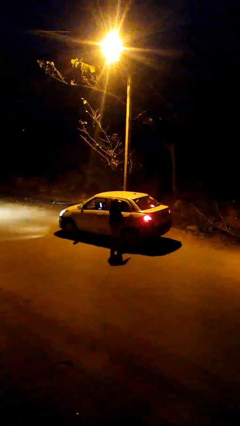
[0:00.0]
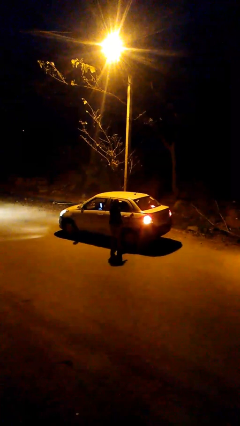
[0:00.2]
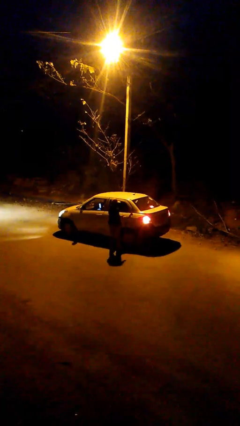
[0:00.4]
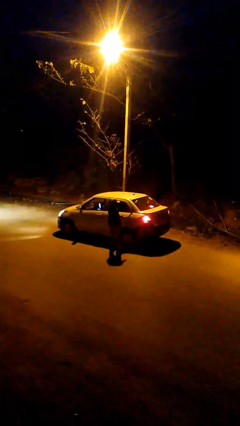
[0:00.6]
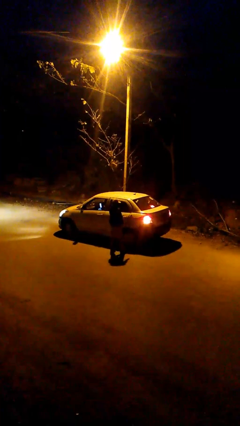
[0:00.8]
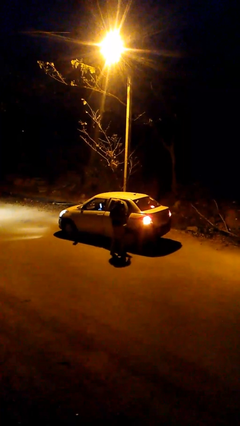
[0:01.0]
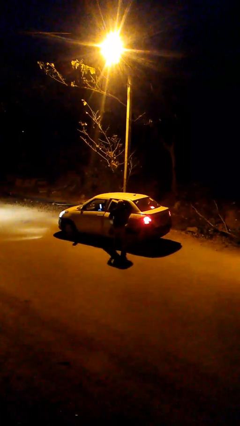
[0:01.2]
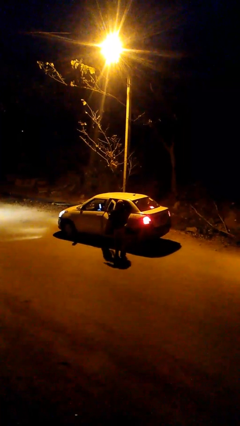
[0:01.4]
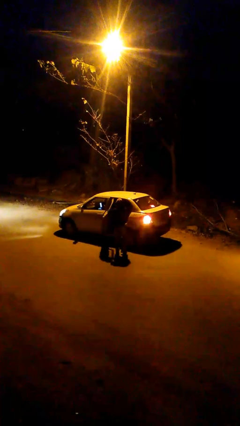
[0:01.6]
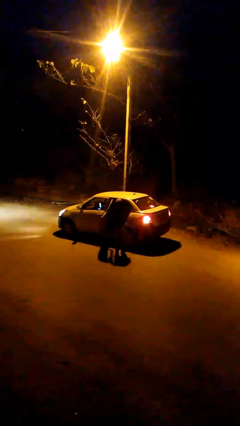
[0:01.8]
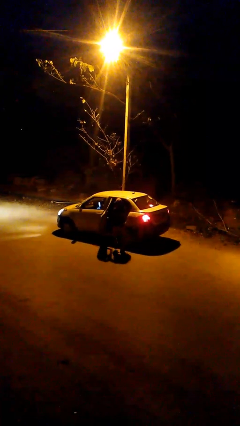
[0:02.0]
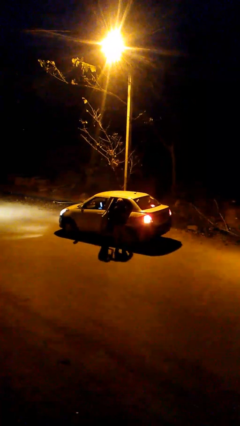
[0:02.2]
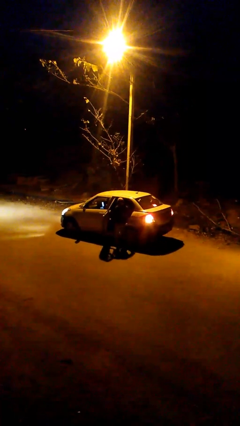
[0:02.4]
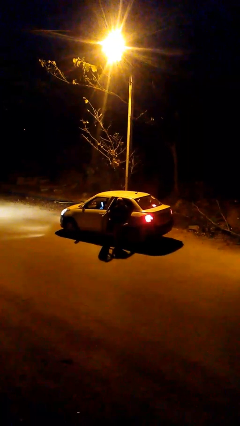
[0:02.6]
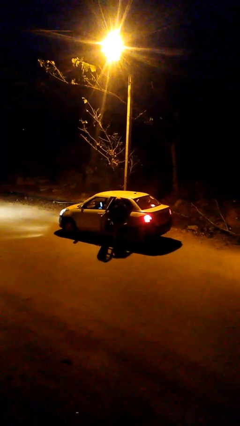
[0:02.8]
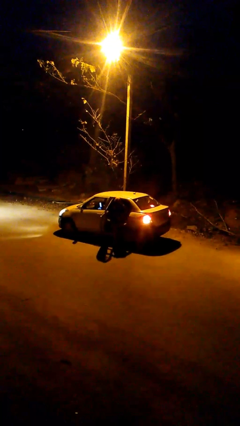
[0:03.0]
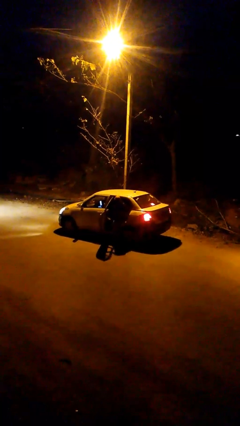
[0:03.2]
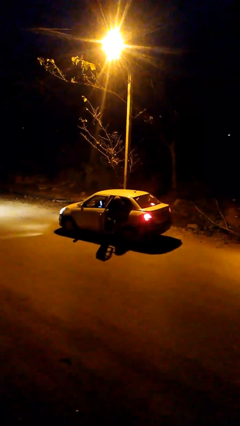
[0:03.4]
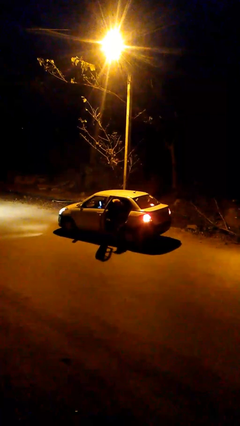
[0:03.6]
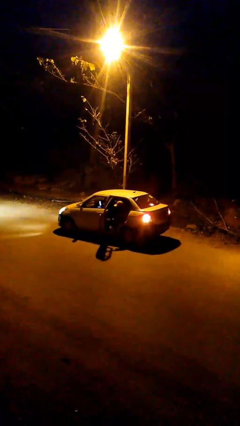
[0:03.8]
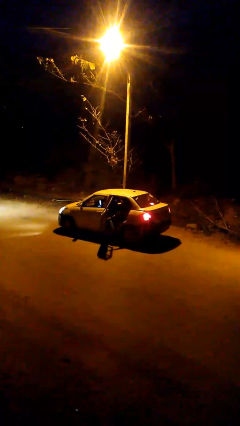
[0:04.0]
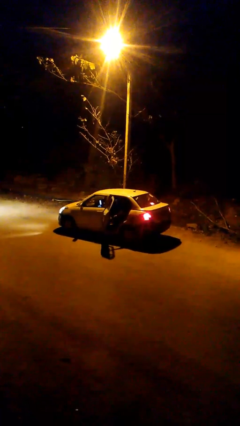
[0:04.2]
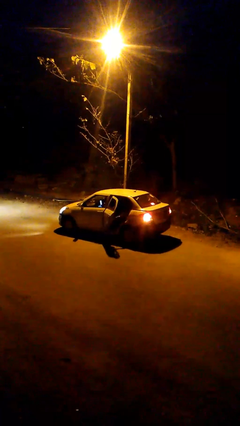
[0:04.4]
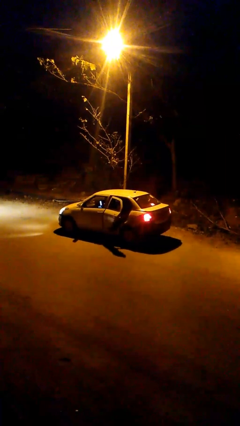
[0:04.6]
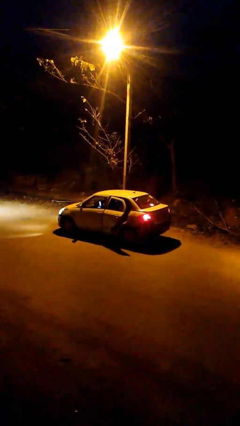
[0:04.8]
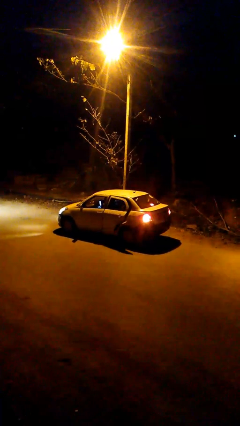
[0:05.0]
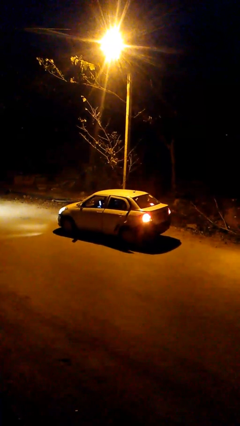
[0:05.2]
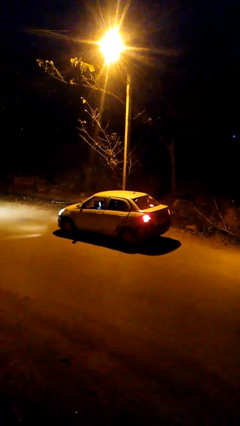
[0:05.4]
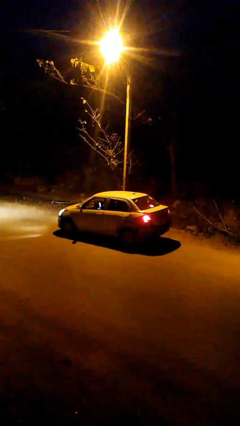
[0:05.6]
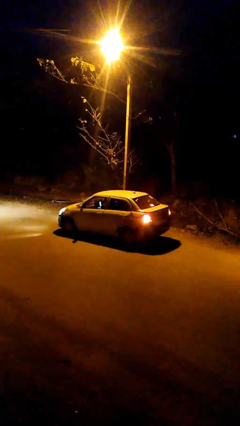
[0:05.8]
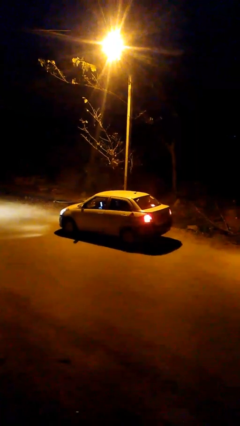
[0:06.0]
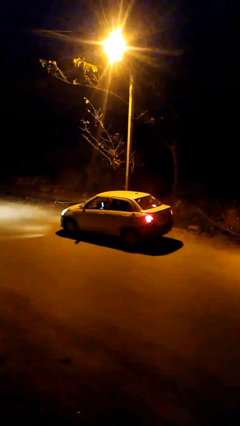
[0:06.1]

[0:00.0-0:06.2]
car picks up person

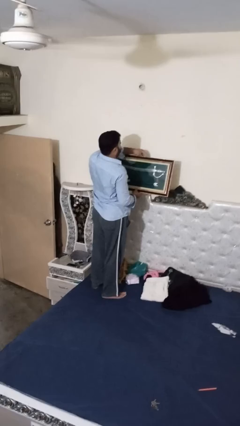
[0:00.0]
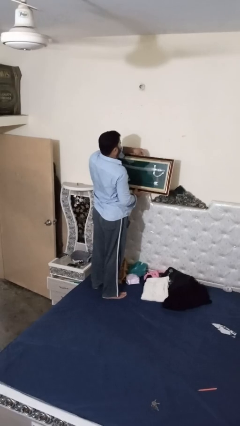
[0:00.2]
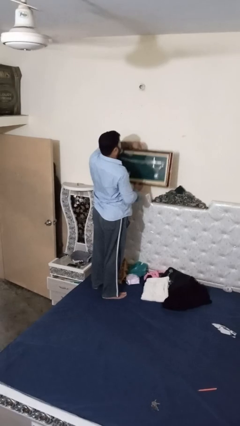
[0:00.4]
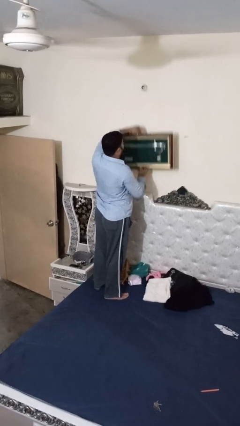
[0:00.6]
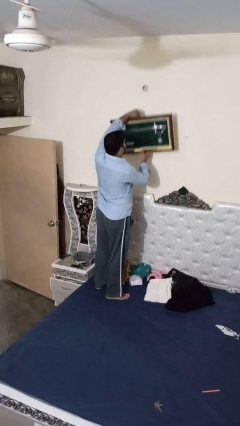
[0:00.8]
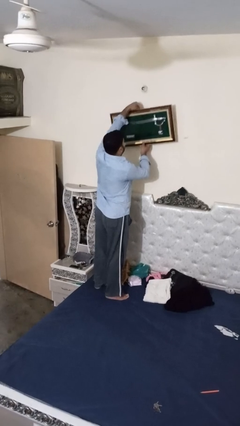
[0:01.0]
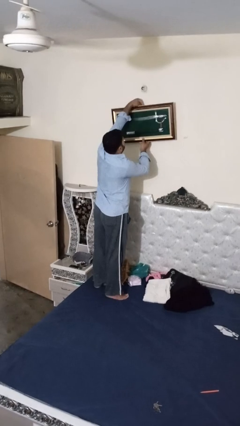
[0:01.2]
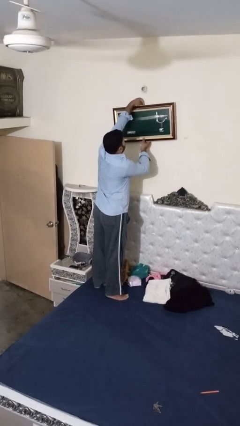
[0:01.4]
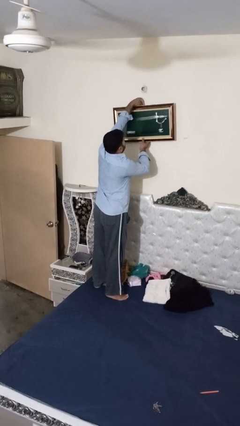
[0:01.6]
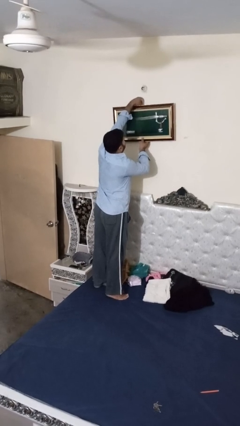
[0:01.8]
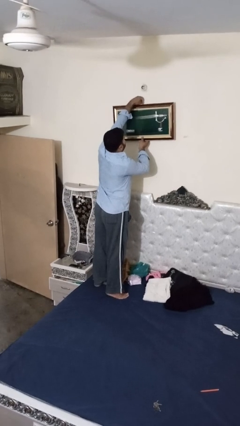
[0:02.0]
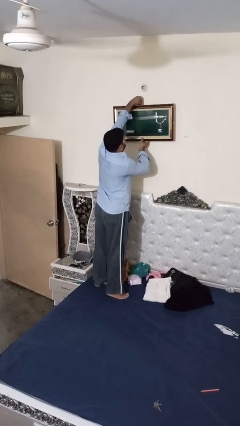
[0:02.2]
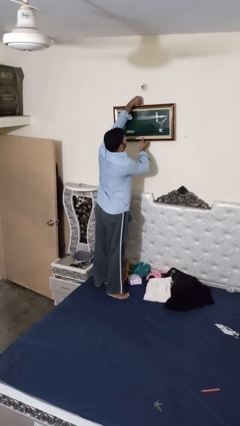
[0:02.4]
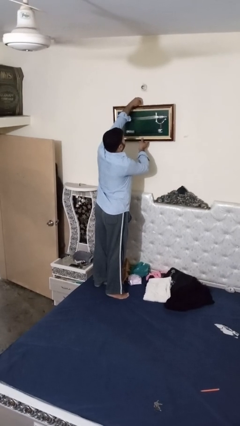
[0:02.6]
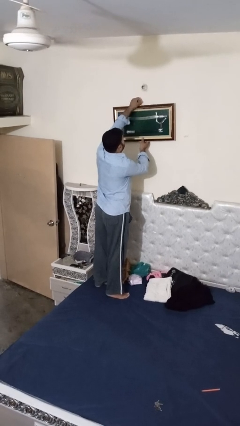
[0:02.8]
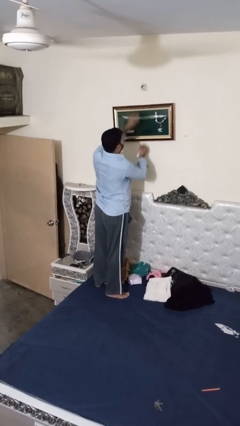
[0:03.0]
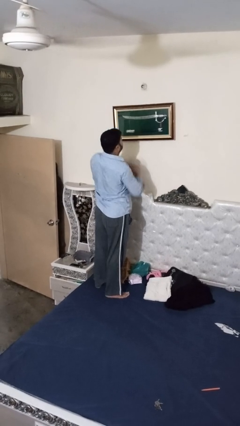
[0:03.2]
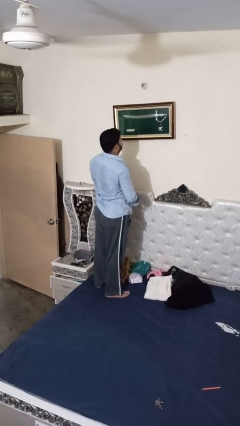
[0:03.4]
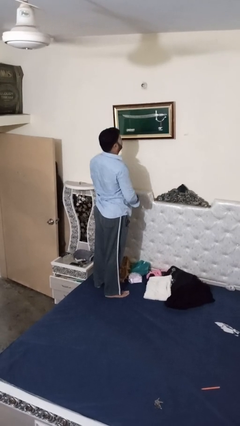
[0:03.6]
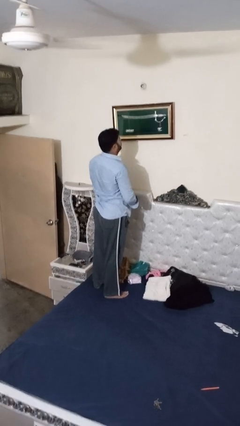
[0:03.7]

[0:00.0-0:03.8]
person puts up picture frame

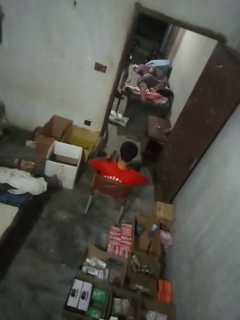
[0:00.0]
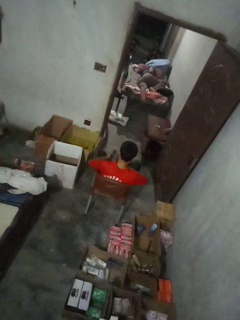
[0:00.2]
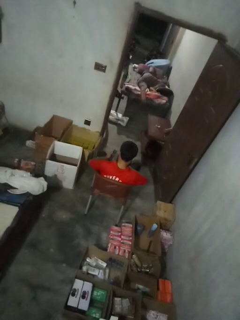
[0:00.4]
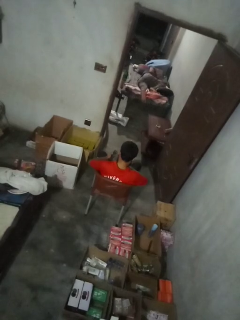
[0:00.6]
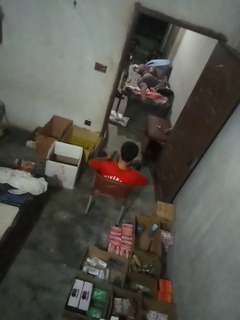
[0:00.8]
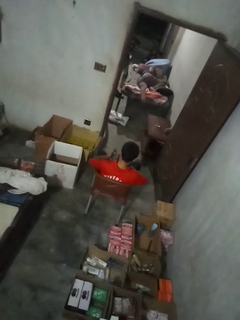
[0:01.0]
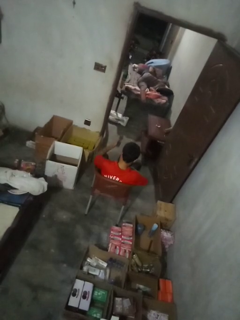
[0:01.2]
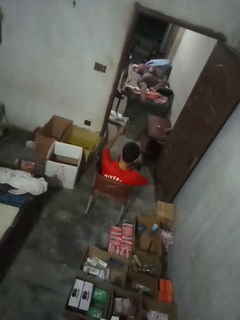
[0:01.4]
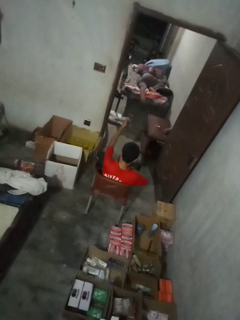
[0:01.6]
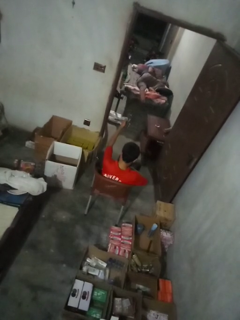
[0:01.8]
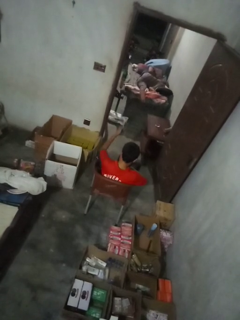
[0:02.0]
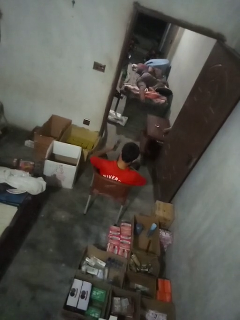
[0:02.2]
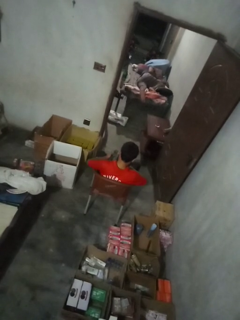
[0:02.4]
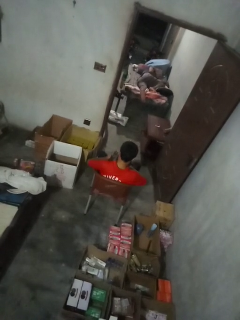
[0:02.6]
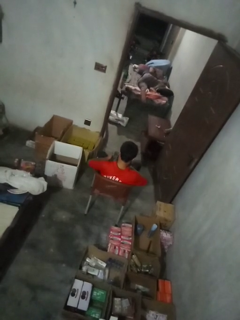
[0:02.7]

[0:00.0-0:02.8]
person uses television remote

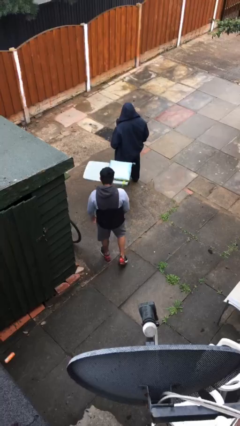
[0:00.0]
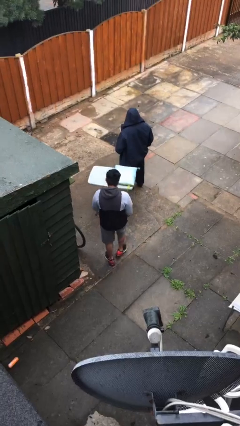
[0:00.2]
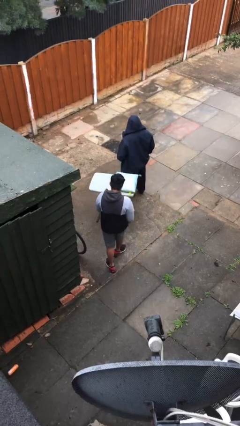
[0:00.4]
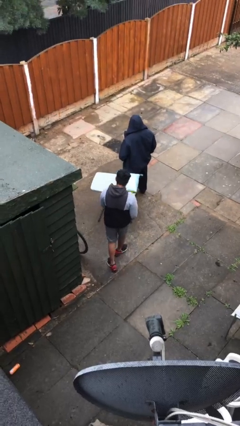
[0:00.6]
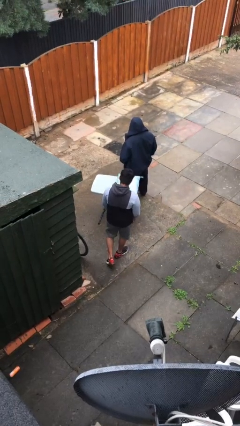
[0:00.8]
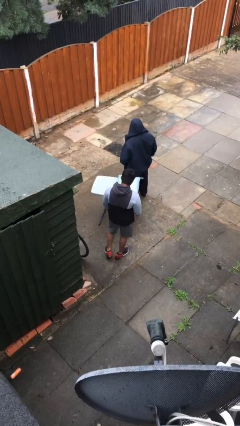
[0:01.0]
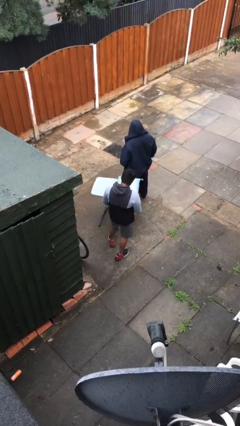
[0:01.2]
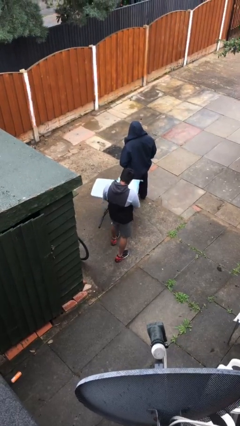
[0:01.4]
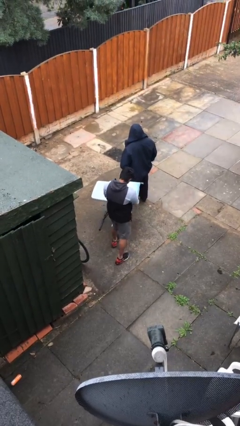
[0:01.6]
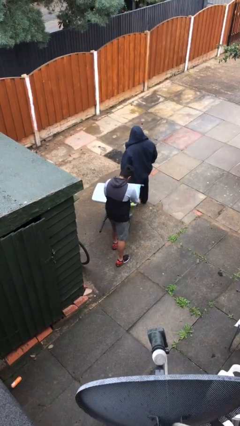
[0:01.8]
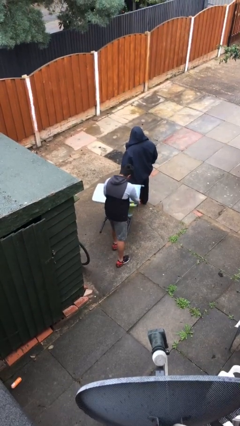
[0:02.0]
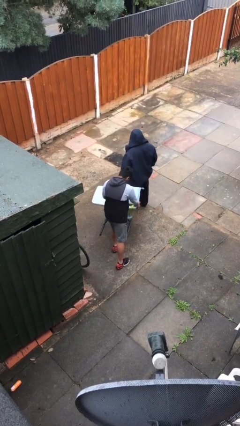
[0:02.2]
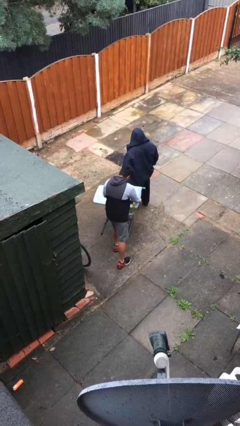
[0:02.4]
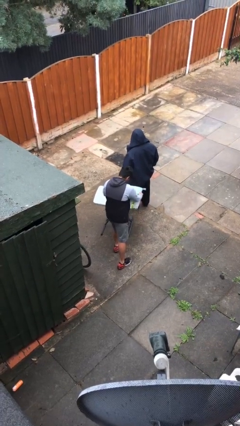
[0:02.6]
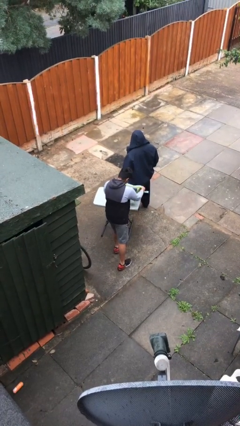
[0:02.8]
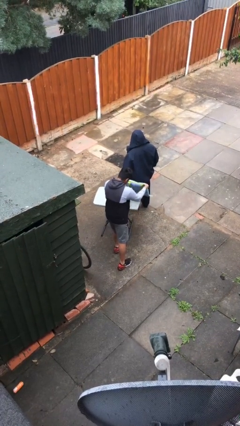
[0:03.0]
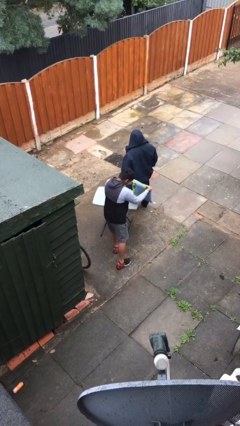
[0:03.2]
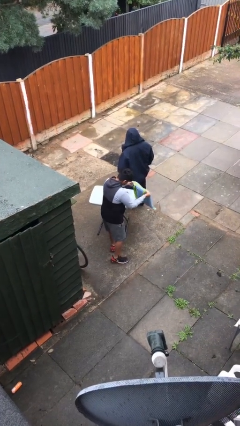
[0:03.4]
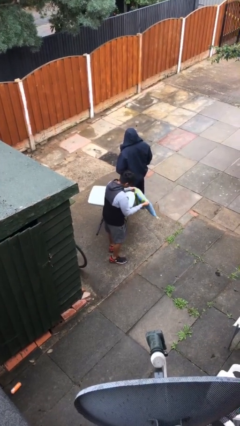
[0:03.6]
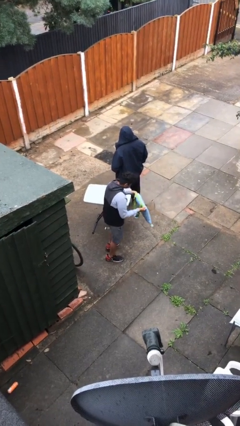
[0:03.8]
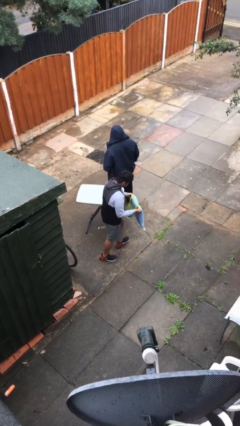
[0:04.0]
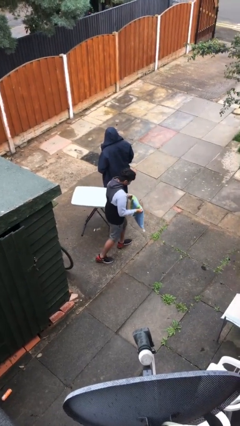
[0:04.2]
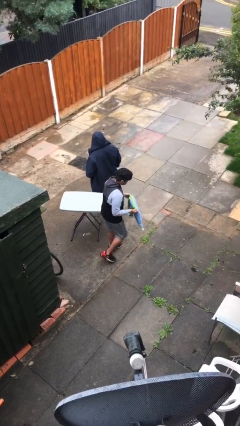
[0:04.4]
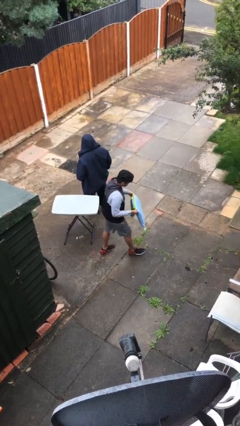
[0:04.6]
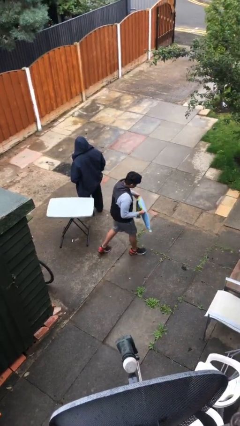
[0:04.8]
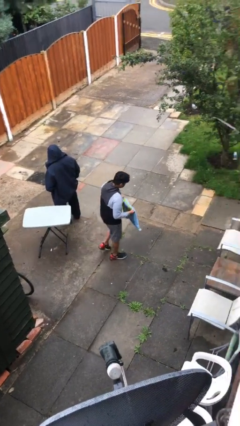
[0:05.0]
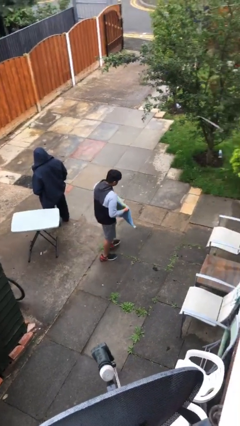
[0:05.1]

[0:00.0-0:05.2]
person steals object from person

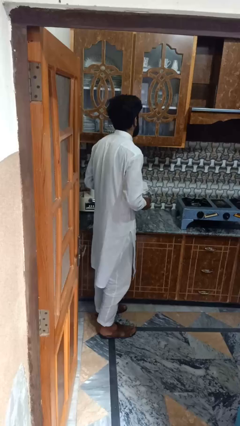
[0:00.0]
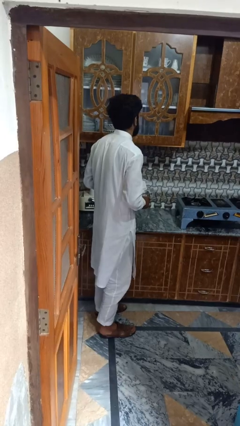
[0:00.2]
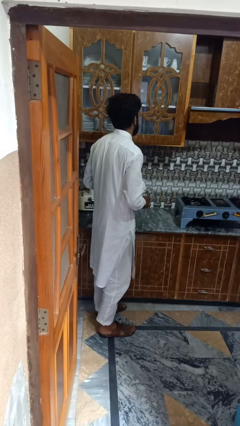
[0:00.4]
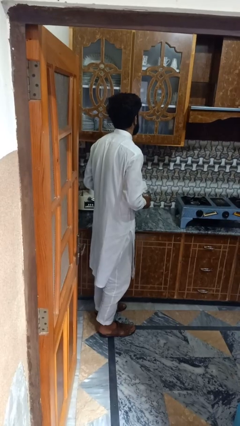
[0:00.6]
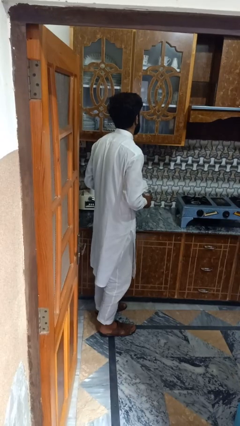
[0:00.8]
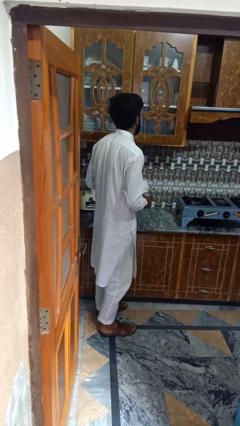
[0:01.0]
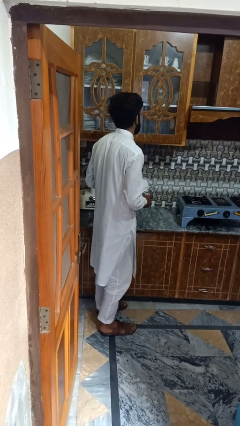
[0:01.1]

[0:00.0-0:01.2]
person takes object from kitchen drawer
